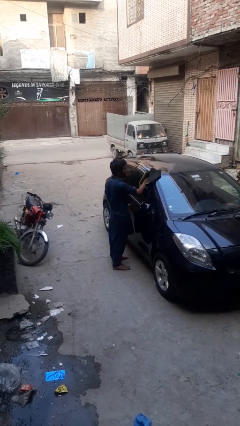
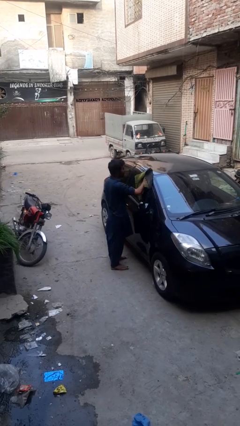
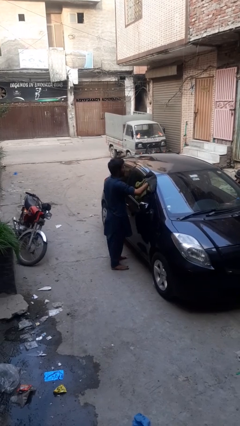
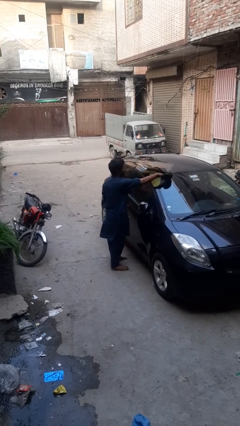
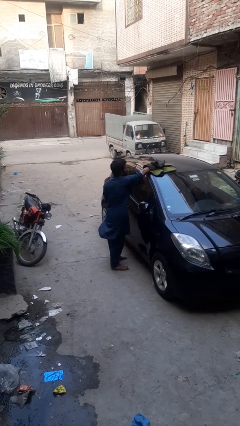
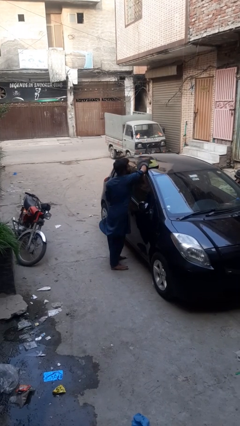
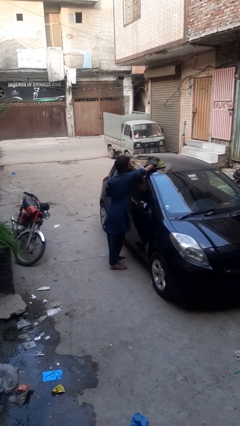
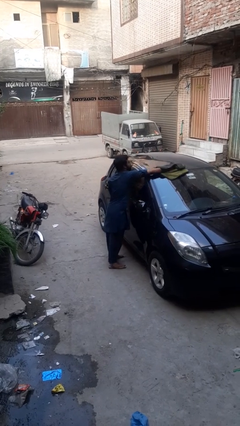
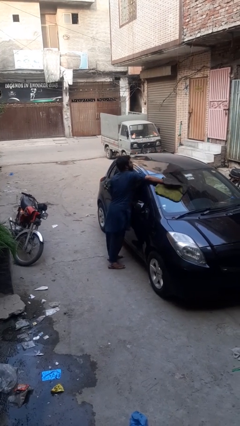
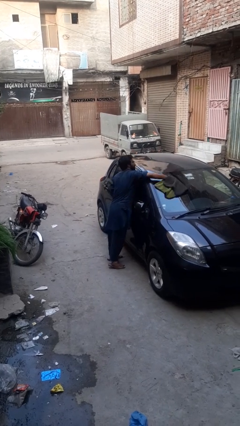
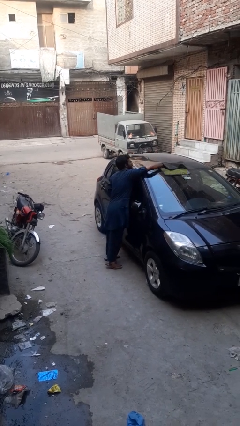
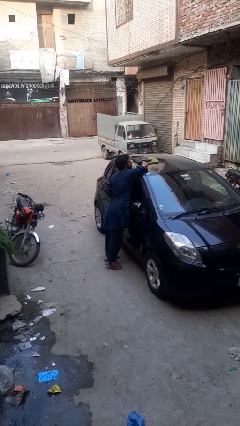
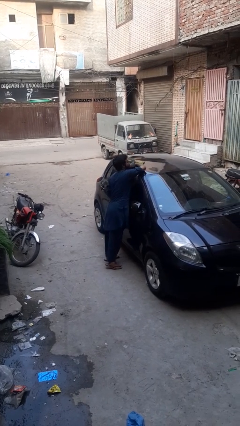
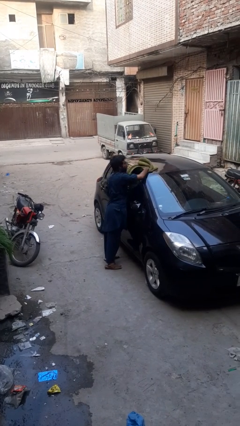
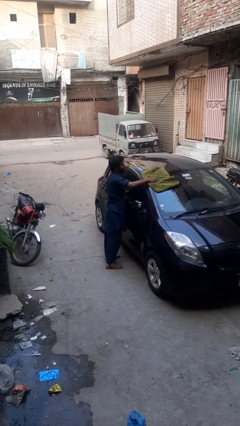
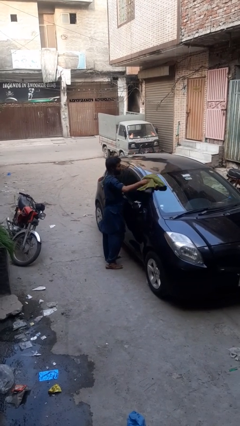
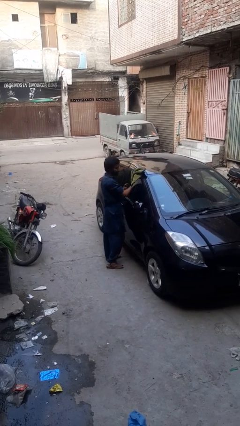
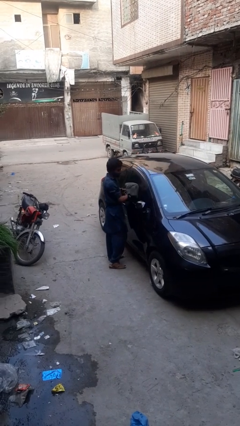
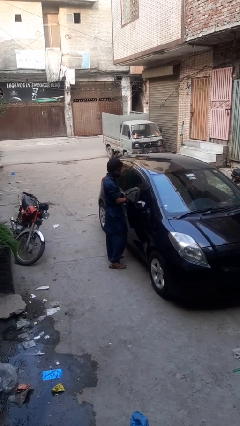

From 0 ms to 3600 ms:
person polishes car with rag

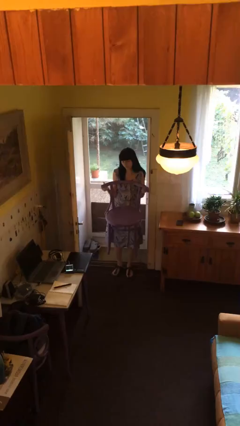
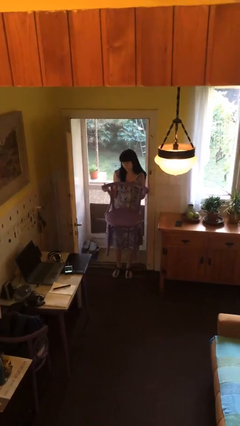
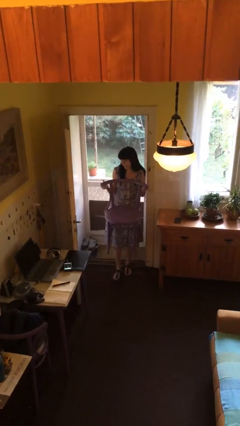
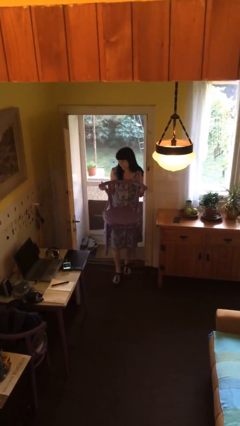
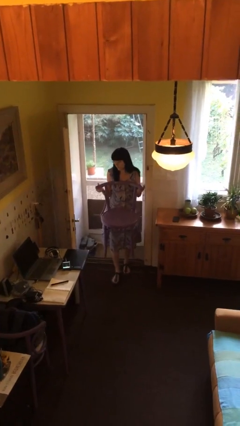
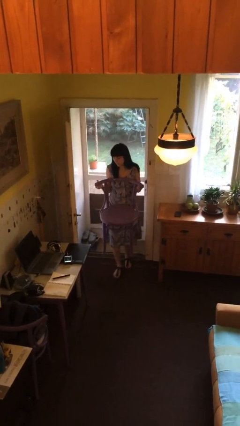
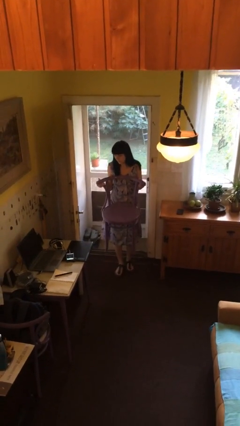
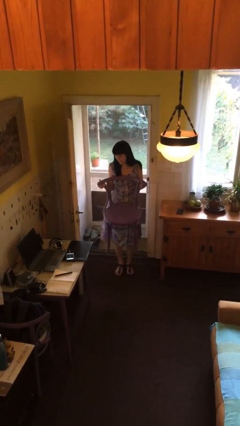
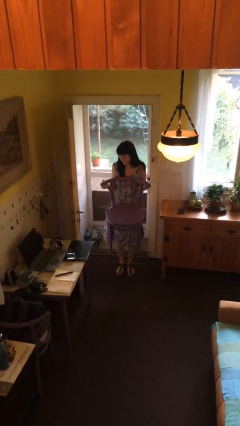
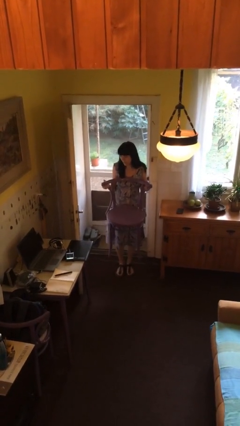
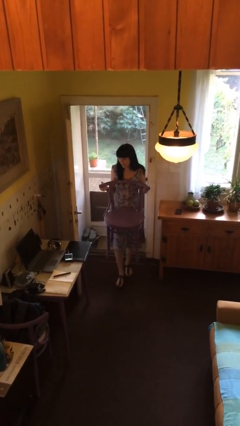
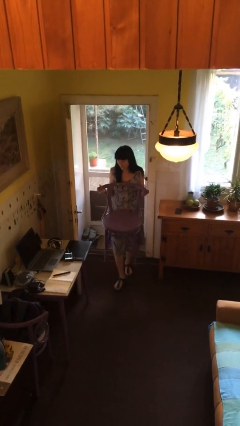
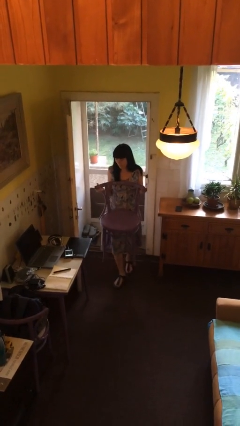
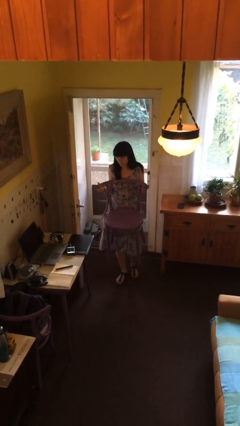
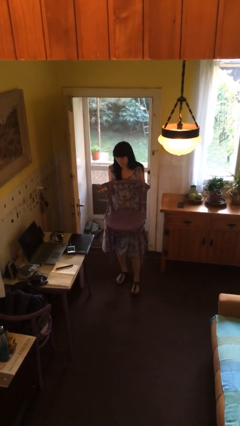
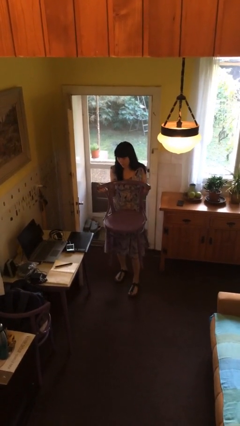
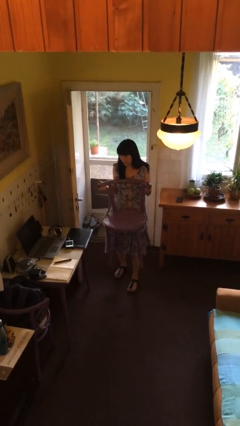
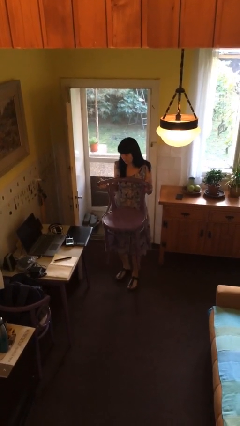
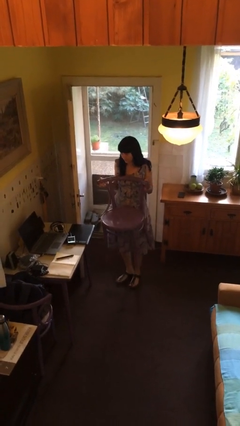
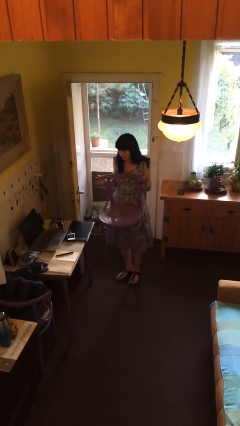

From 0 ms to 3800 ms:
person carries heavy object

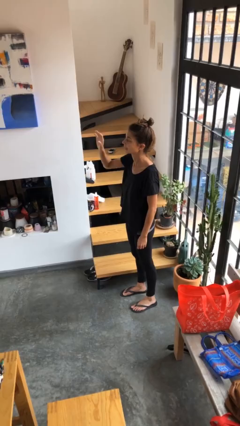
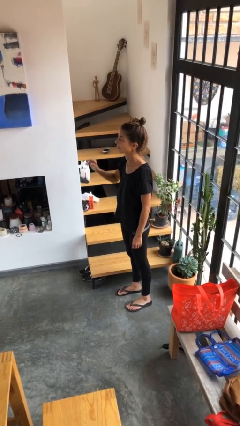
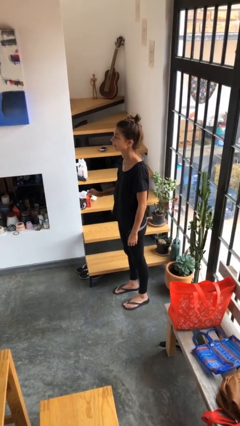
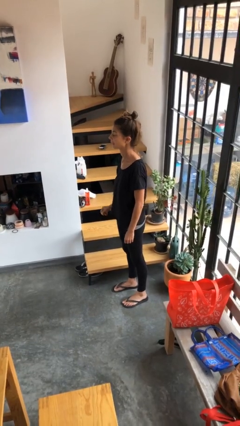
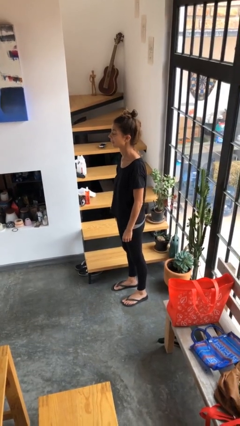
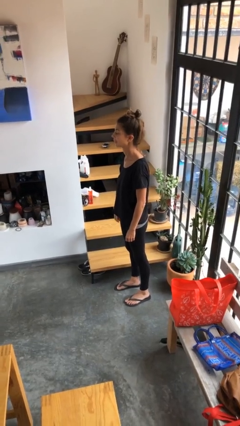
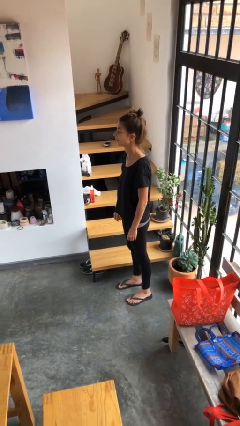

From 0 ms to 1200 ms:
person gestures lower hand

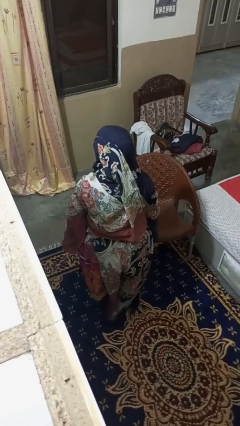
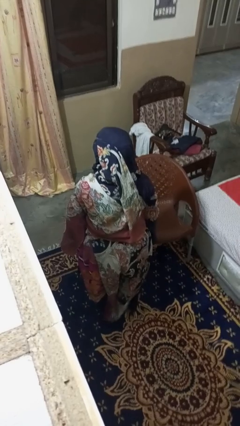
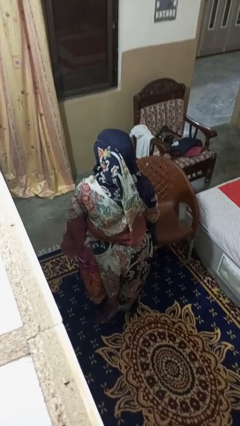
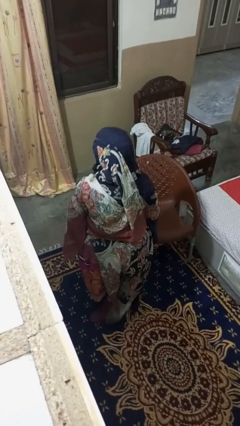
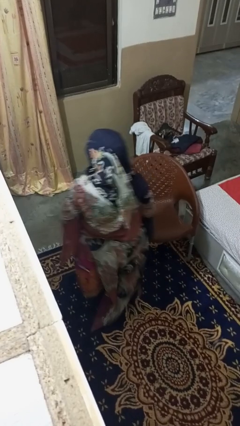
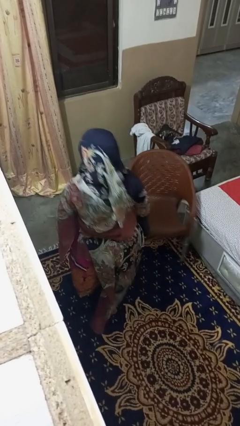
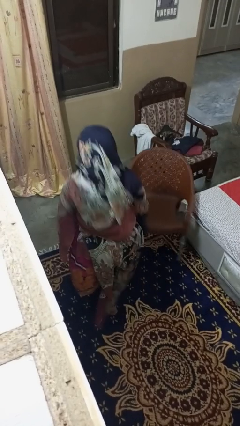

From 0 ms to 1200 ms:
person trips on object on floor

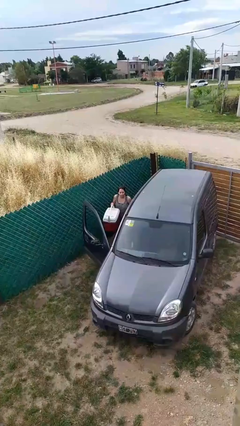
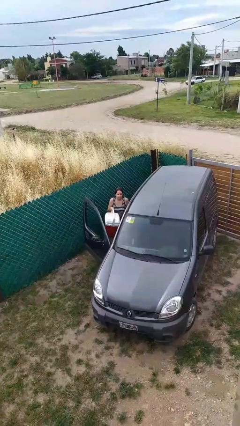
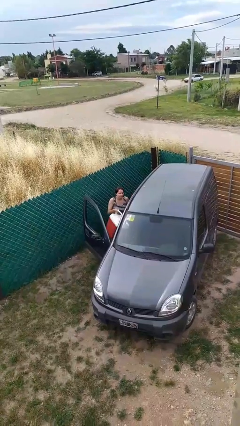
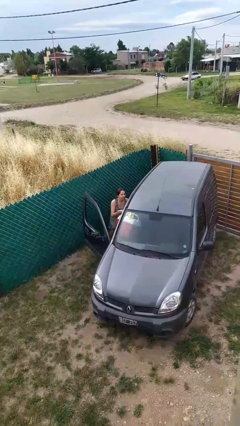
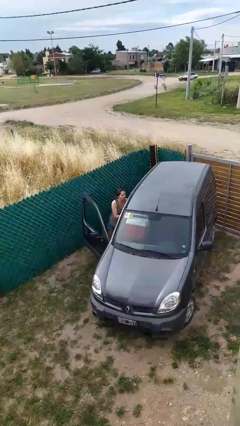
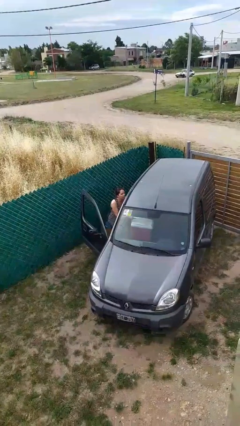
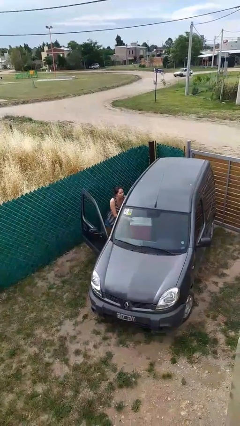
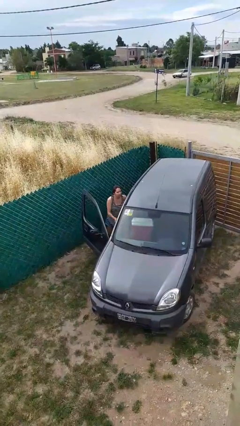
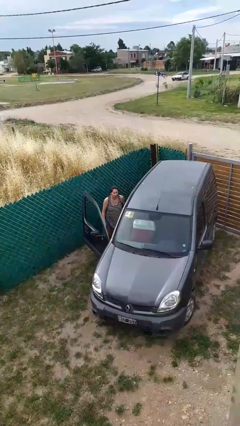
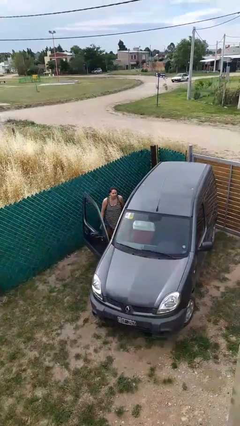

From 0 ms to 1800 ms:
person loads car

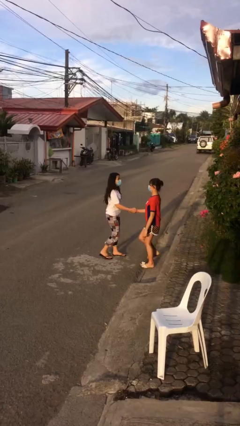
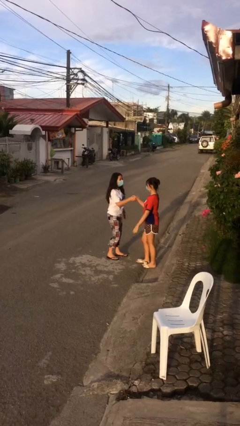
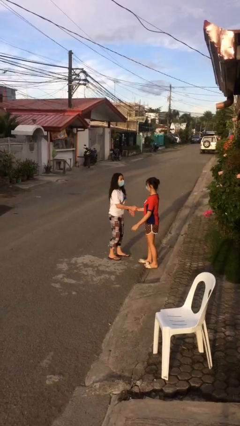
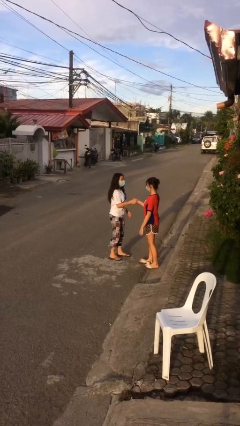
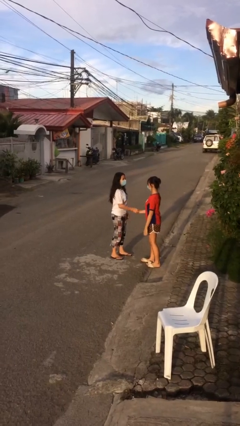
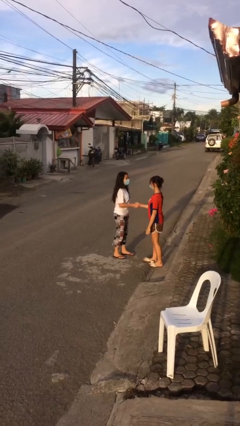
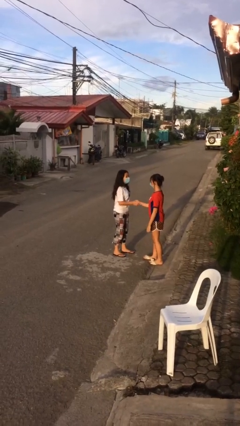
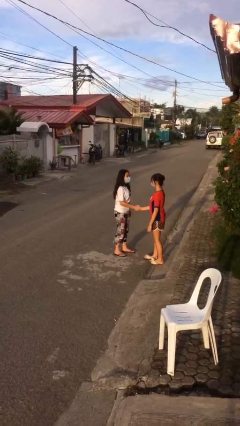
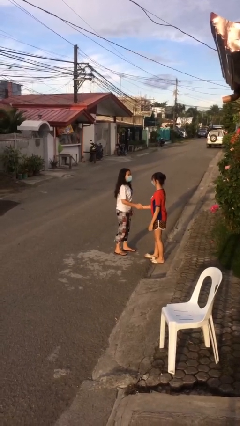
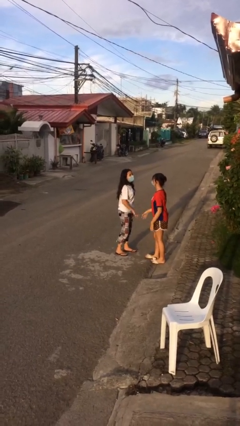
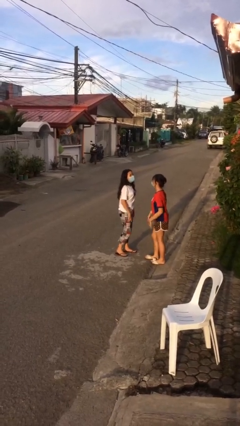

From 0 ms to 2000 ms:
person shakes hand

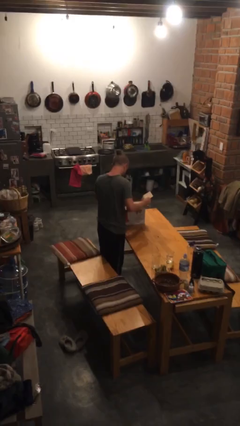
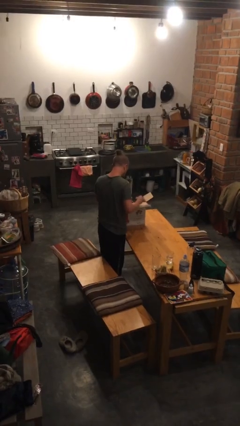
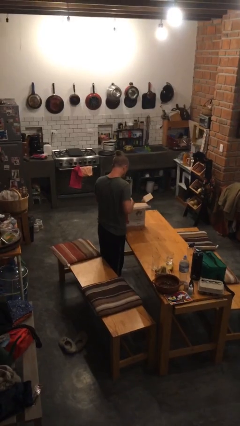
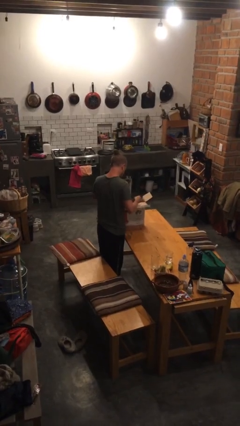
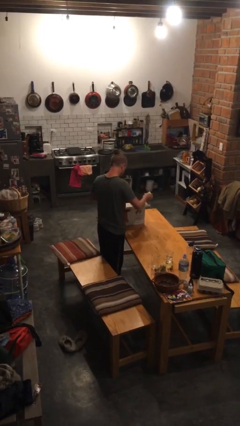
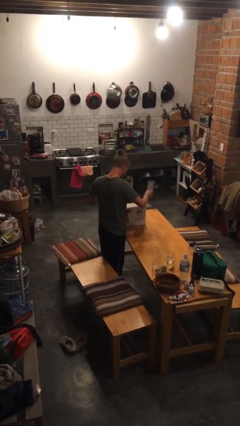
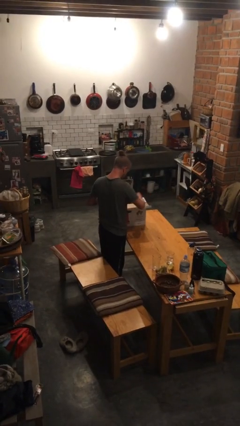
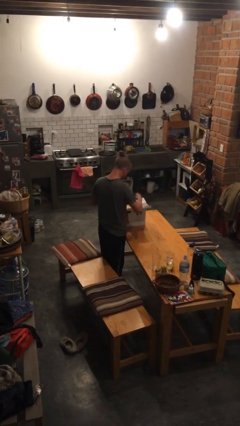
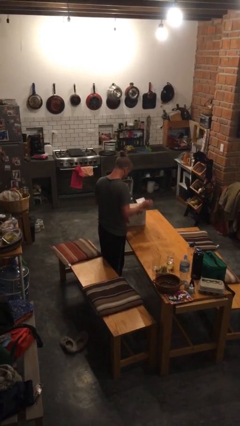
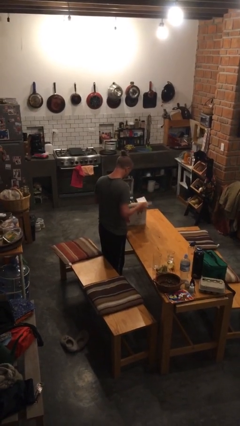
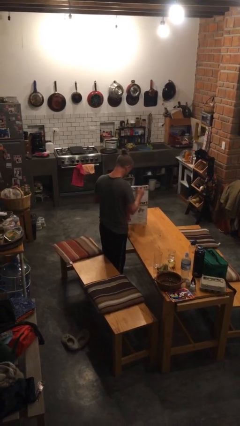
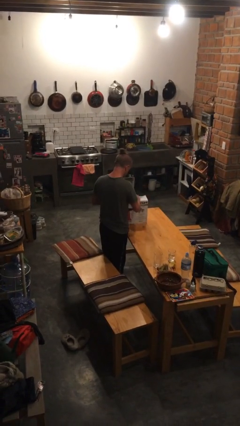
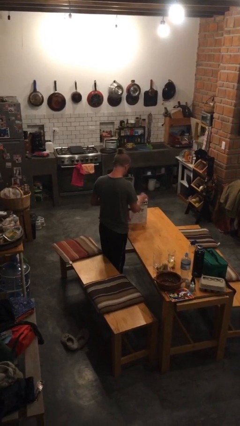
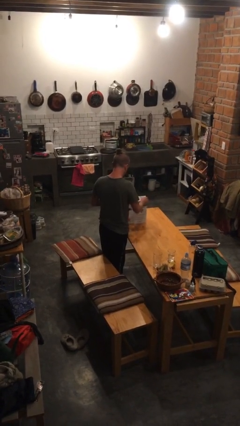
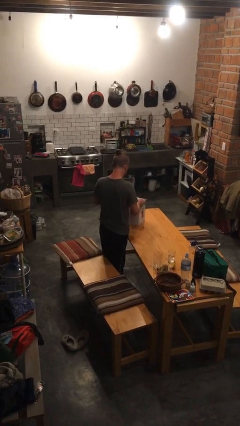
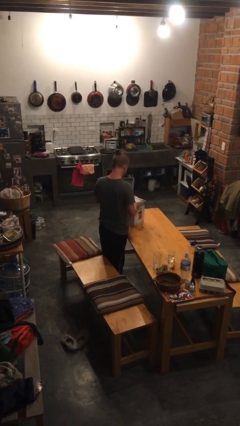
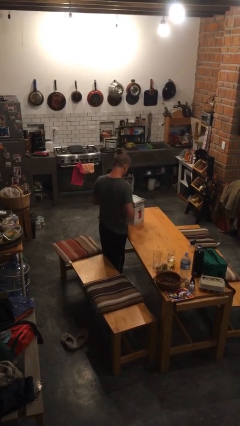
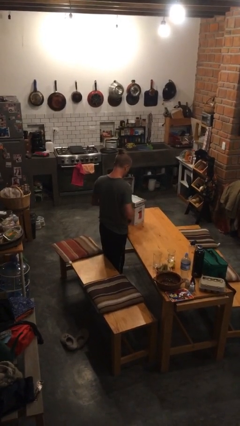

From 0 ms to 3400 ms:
person closes box

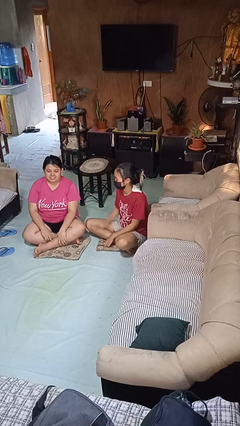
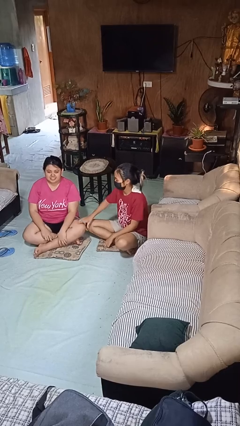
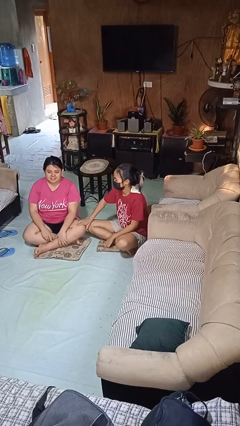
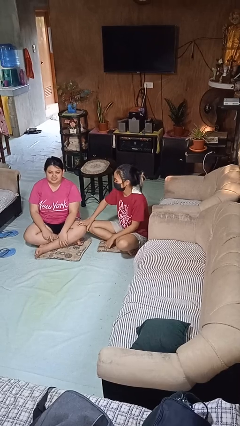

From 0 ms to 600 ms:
person tickles person
